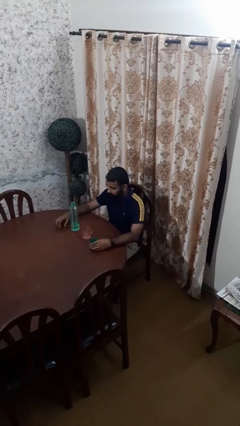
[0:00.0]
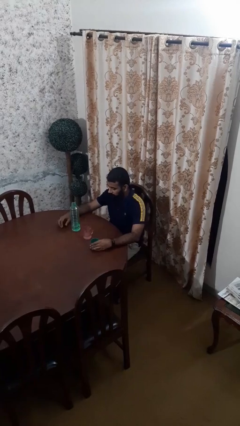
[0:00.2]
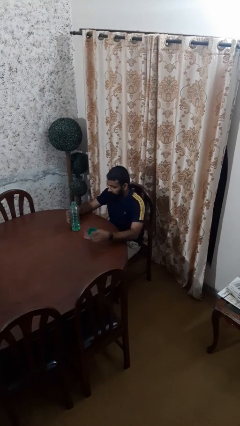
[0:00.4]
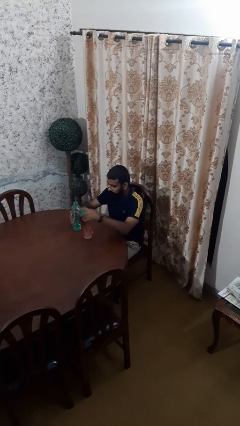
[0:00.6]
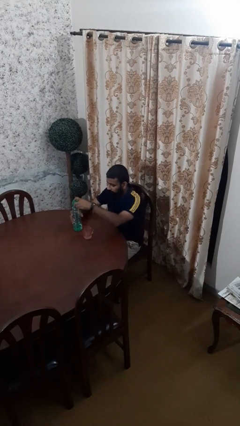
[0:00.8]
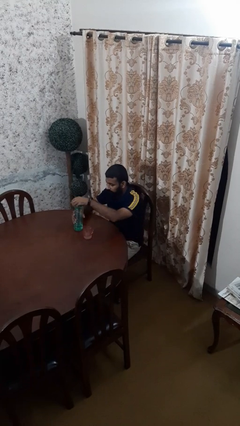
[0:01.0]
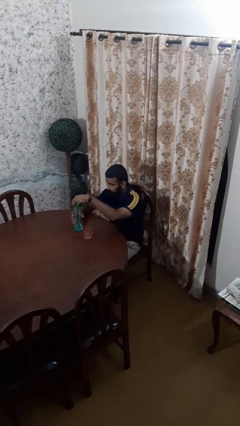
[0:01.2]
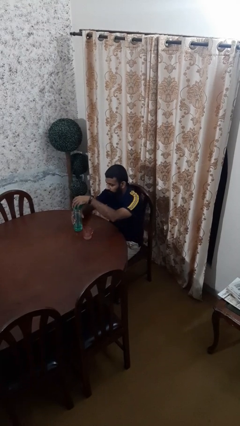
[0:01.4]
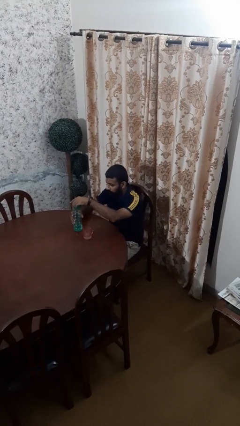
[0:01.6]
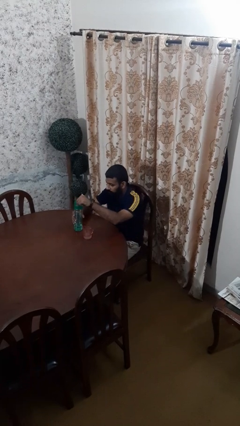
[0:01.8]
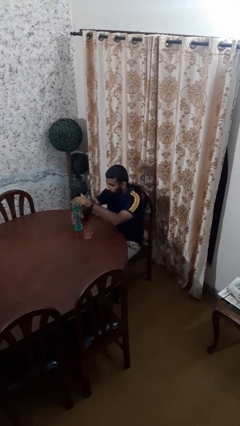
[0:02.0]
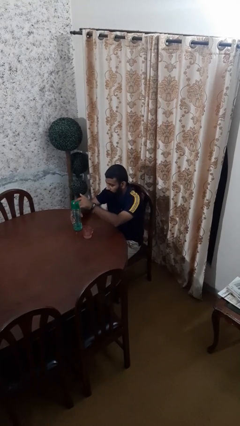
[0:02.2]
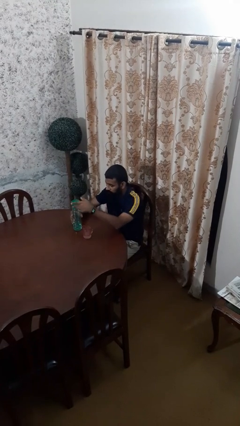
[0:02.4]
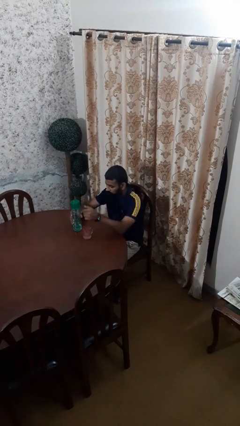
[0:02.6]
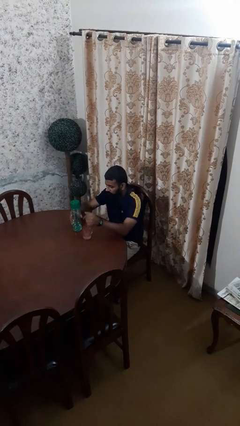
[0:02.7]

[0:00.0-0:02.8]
person screws lid to bottle

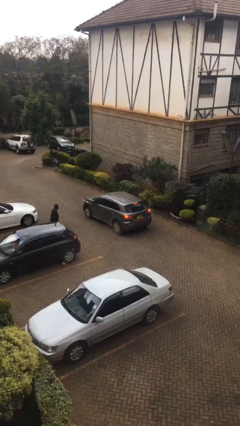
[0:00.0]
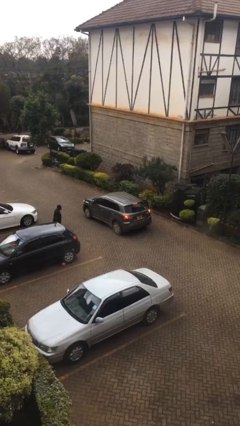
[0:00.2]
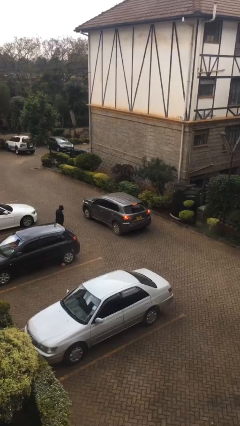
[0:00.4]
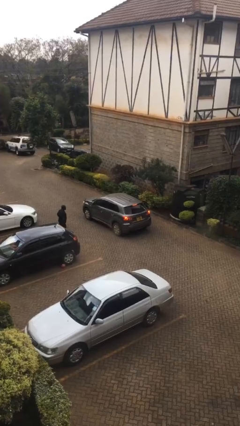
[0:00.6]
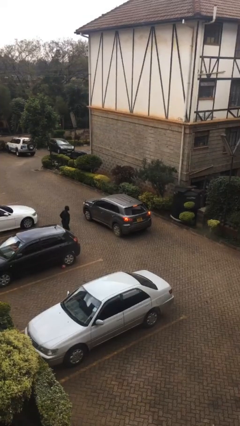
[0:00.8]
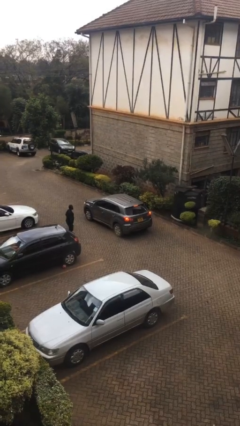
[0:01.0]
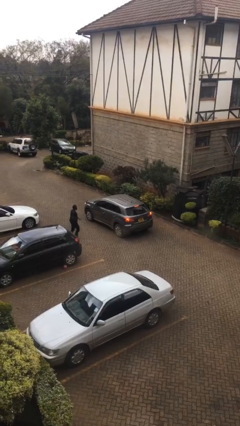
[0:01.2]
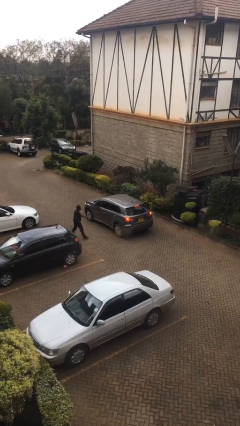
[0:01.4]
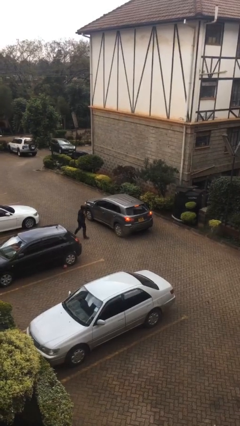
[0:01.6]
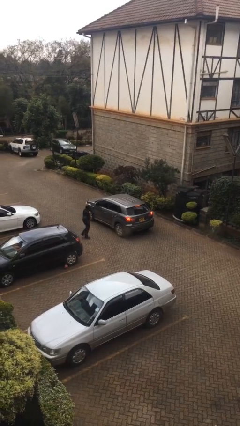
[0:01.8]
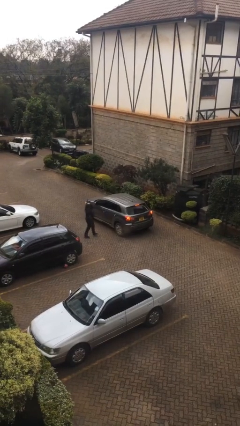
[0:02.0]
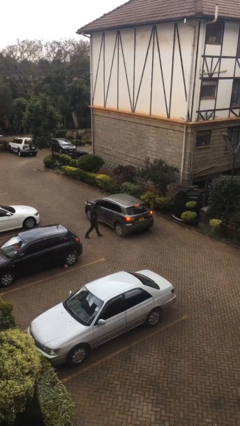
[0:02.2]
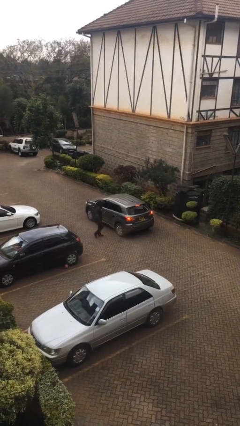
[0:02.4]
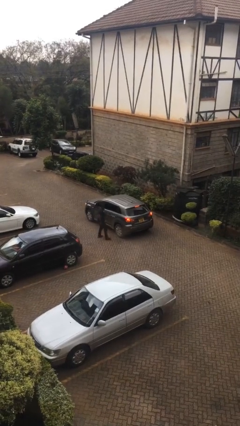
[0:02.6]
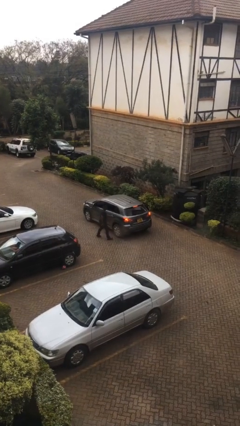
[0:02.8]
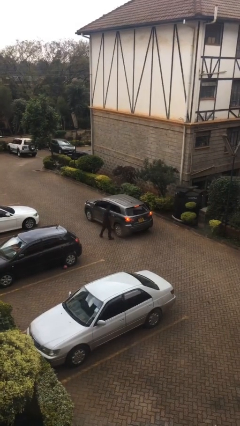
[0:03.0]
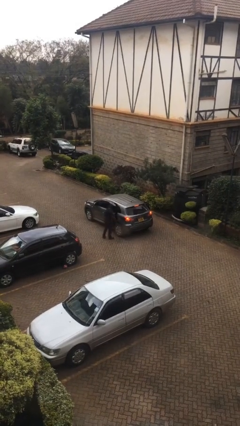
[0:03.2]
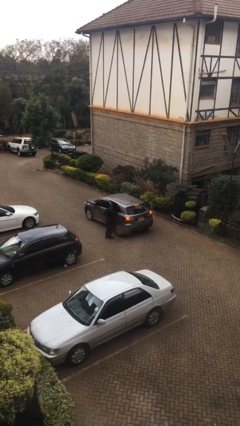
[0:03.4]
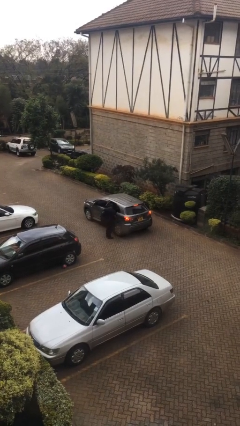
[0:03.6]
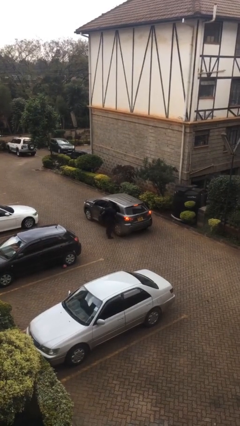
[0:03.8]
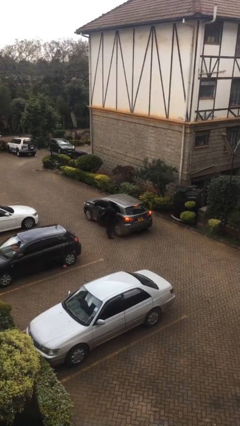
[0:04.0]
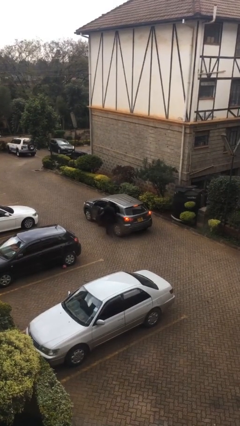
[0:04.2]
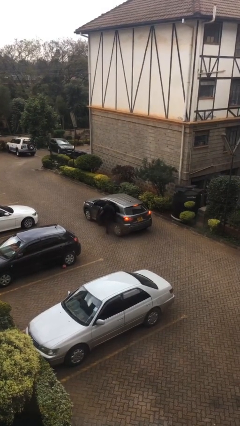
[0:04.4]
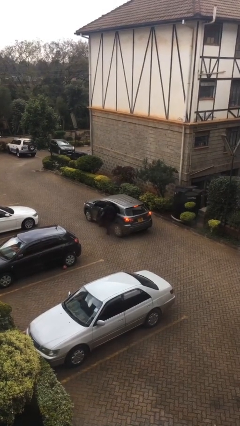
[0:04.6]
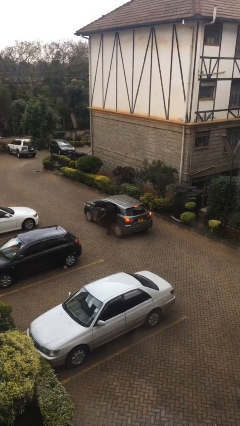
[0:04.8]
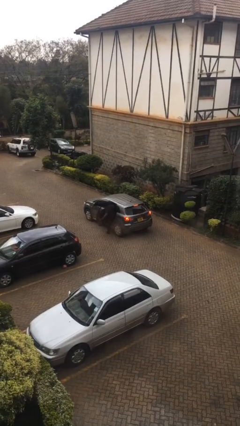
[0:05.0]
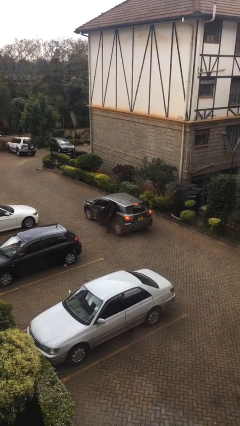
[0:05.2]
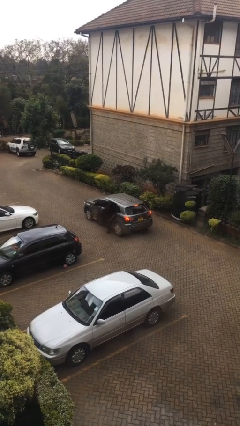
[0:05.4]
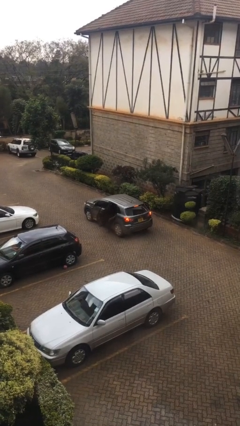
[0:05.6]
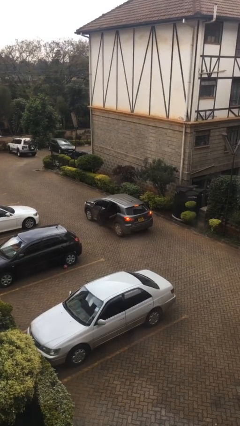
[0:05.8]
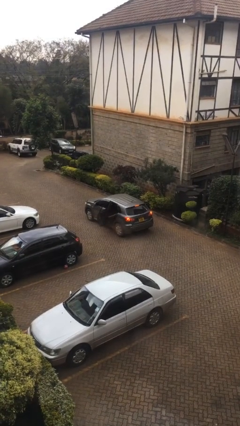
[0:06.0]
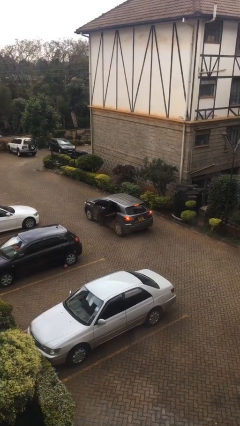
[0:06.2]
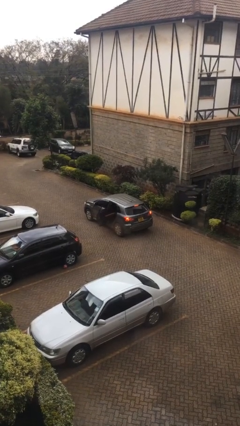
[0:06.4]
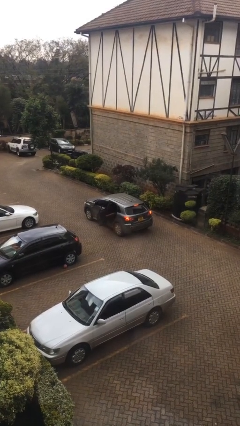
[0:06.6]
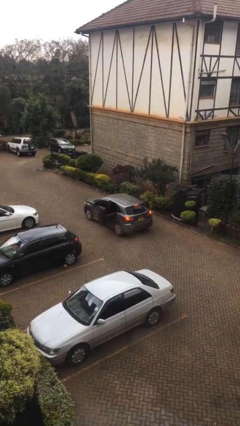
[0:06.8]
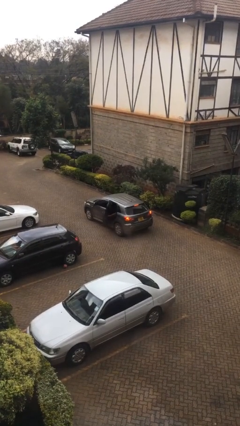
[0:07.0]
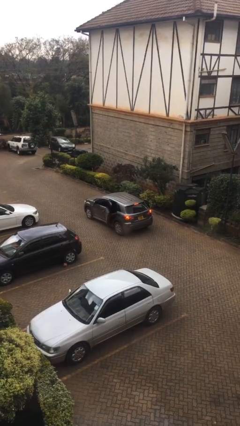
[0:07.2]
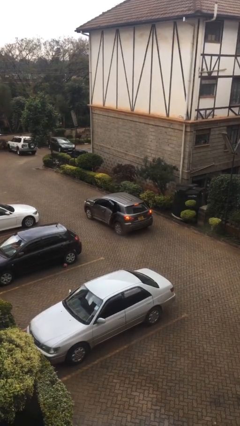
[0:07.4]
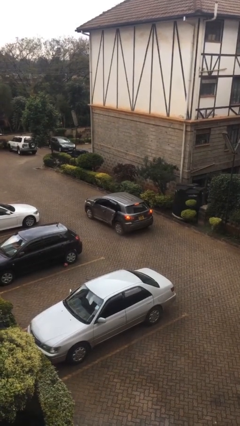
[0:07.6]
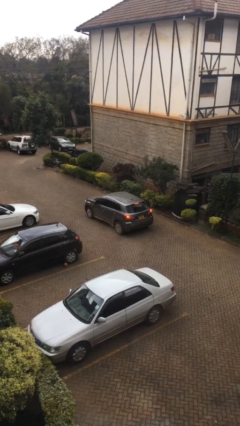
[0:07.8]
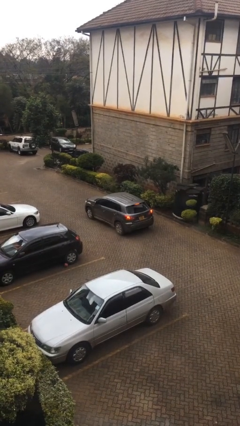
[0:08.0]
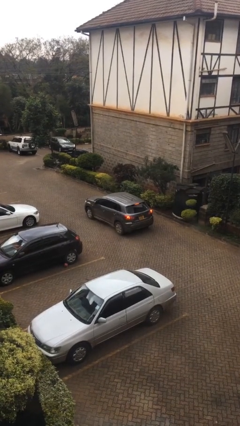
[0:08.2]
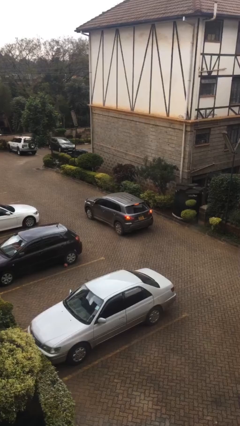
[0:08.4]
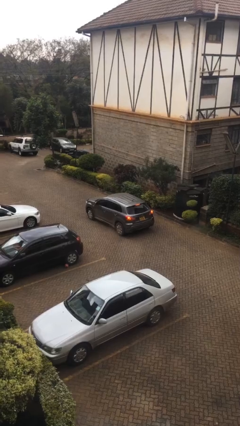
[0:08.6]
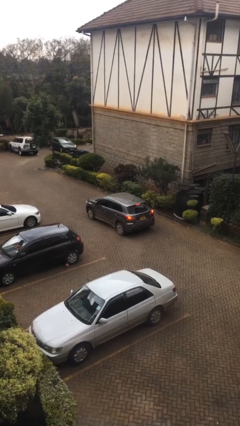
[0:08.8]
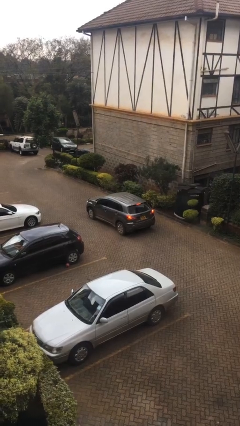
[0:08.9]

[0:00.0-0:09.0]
car picks up person

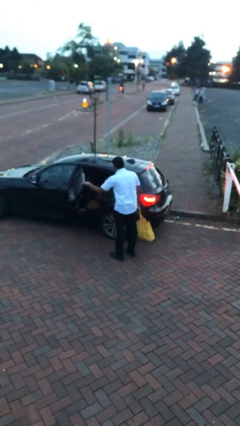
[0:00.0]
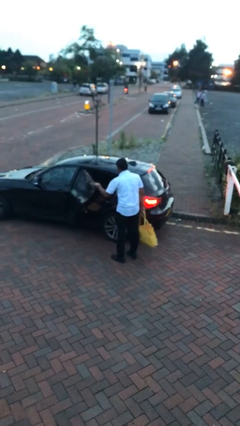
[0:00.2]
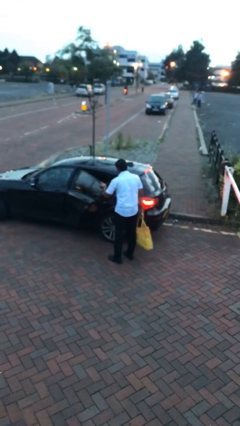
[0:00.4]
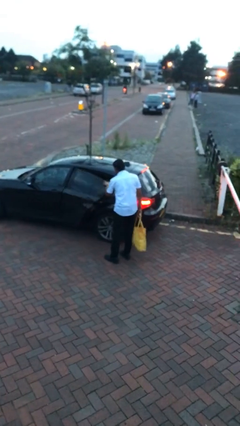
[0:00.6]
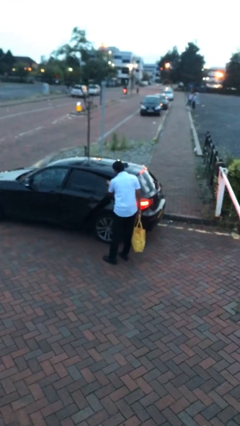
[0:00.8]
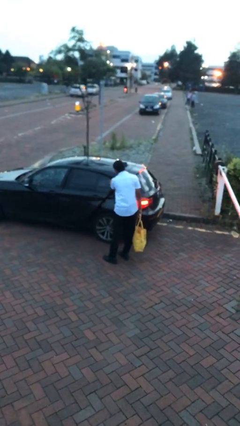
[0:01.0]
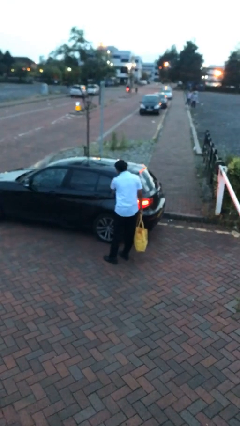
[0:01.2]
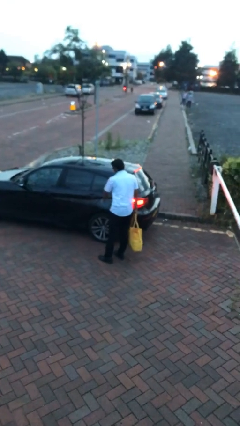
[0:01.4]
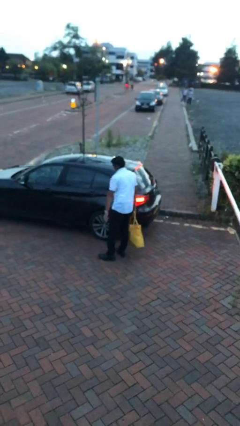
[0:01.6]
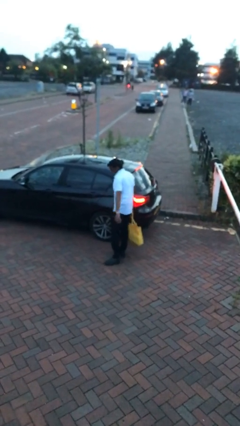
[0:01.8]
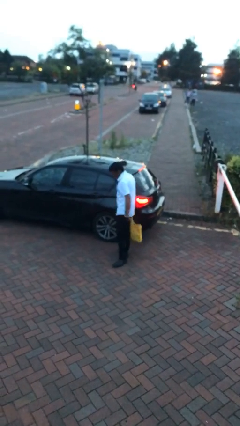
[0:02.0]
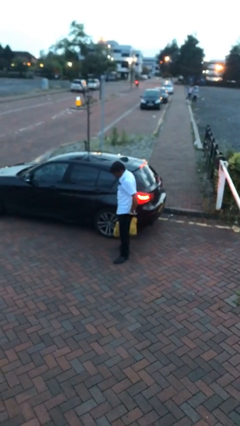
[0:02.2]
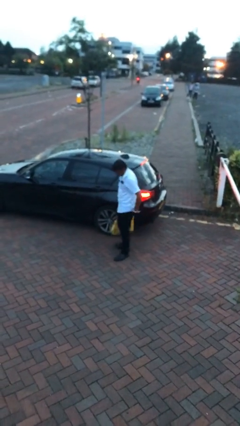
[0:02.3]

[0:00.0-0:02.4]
person closes car door

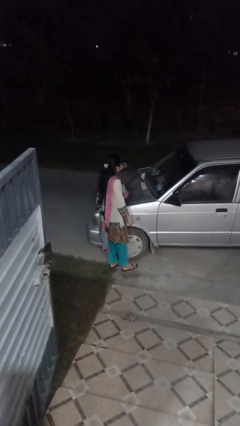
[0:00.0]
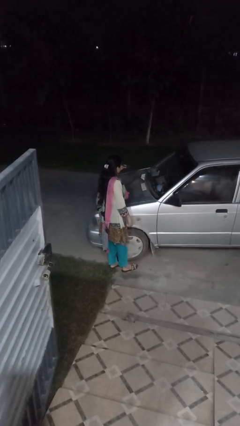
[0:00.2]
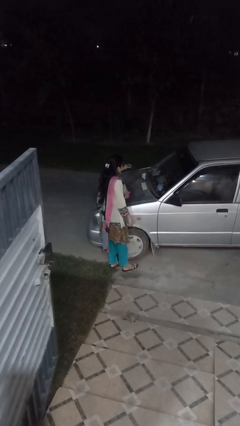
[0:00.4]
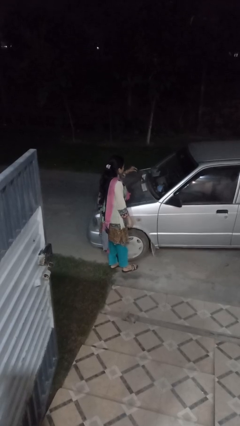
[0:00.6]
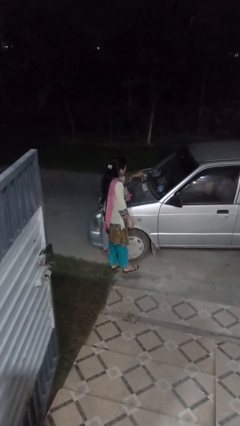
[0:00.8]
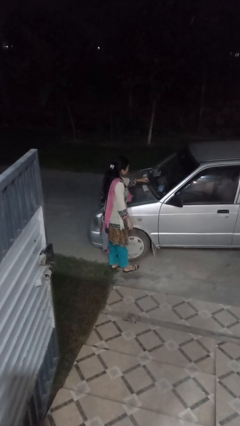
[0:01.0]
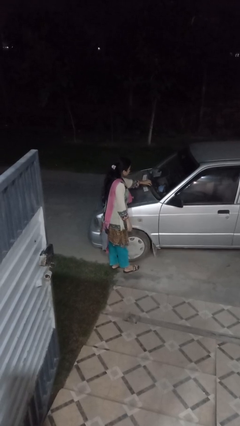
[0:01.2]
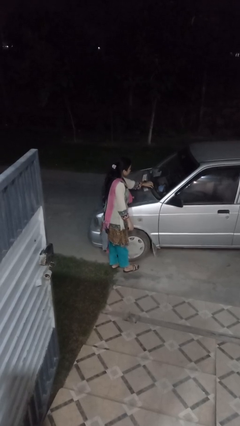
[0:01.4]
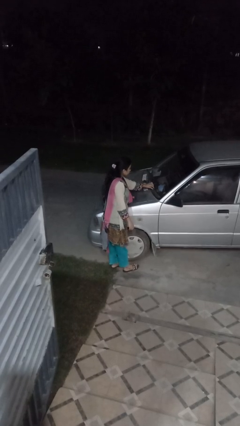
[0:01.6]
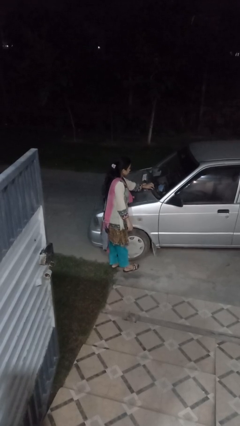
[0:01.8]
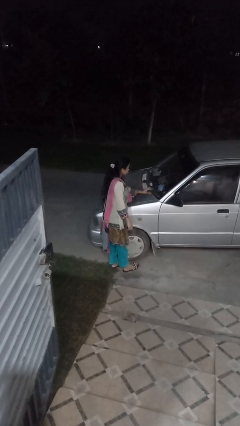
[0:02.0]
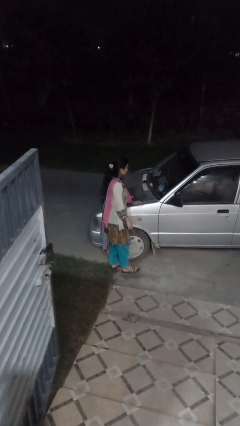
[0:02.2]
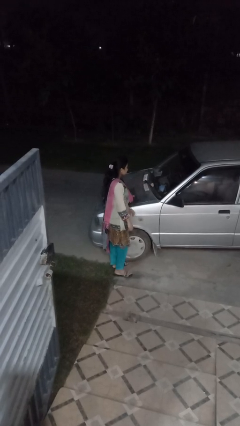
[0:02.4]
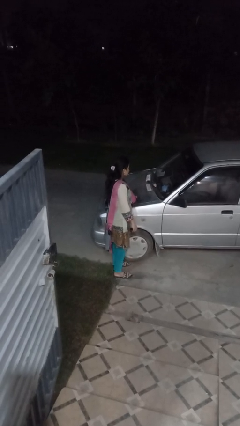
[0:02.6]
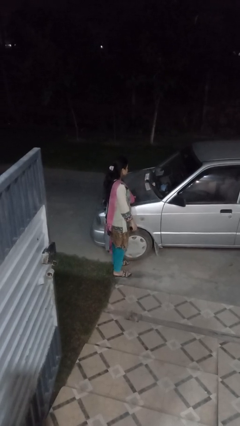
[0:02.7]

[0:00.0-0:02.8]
person flips down car wipers

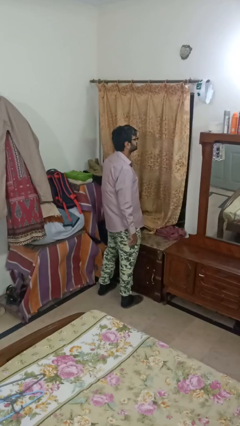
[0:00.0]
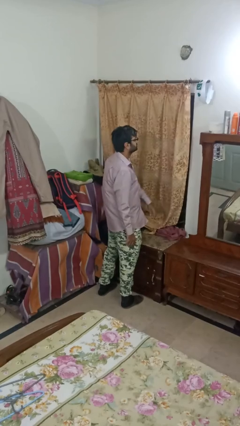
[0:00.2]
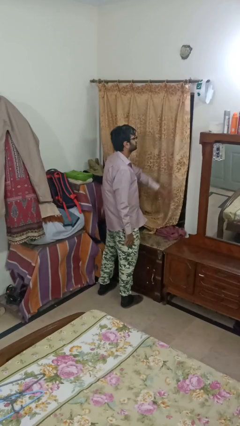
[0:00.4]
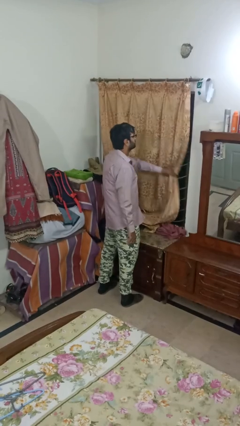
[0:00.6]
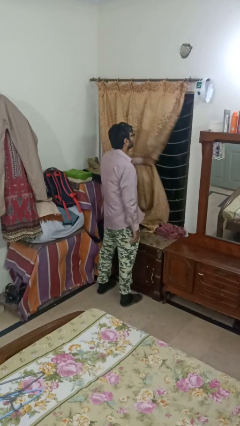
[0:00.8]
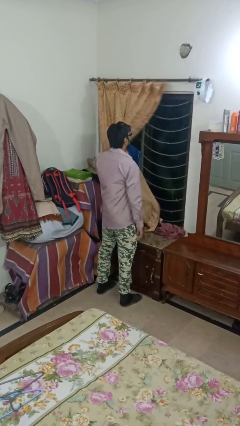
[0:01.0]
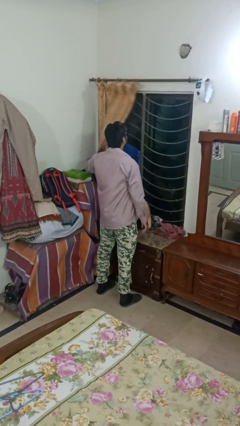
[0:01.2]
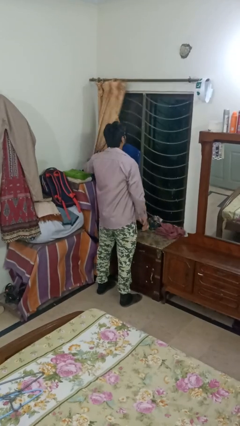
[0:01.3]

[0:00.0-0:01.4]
person opens curtains
